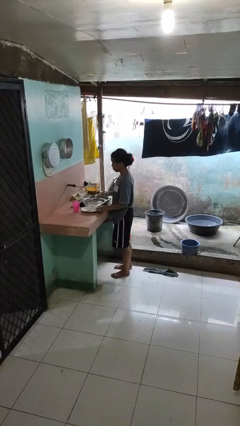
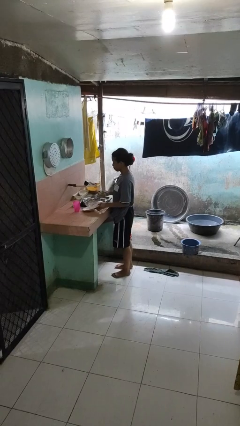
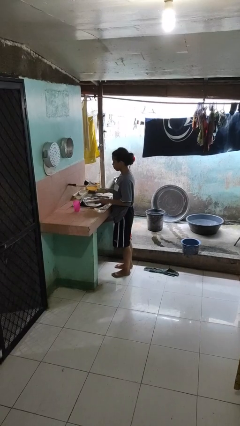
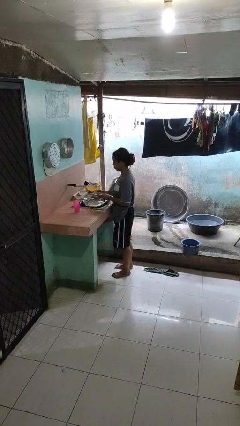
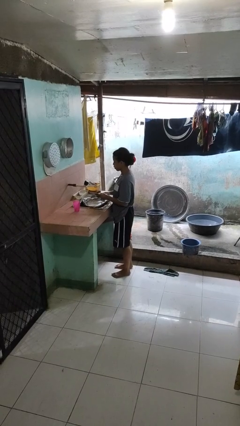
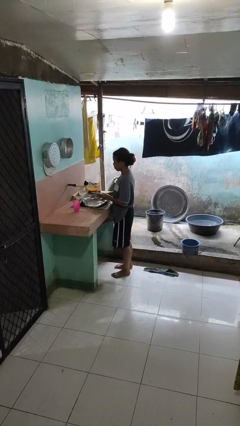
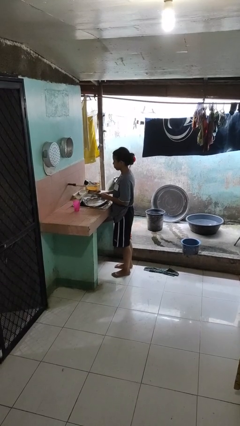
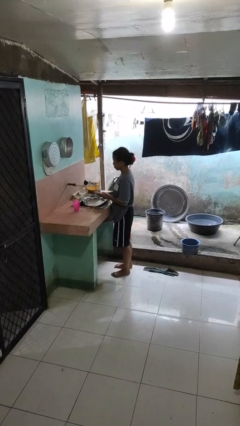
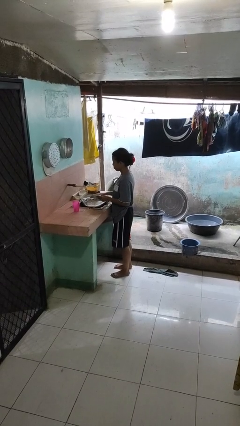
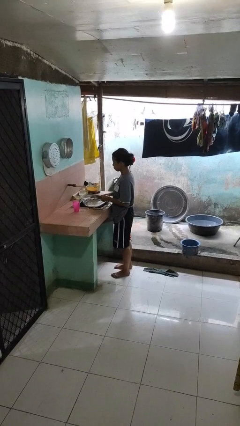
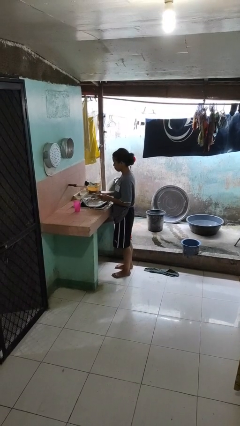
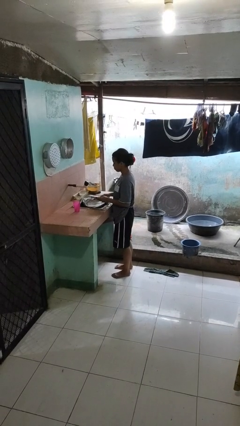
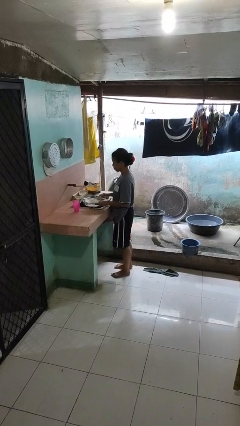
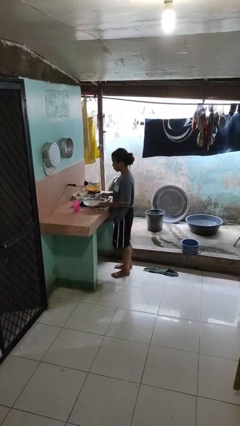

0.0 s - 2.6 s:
person washes dish

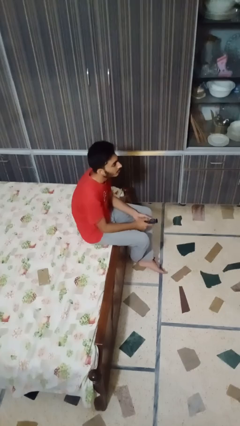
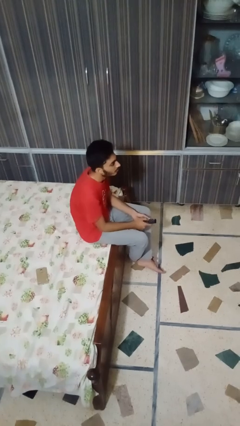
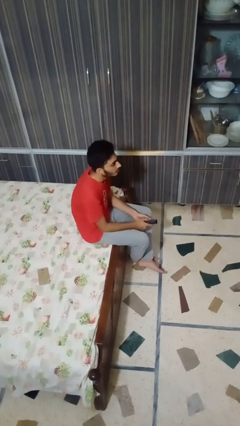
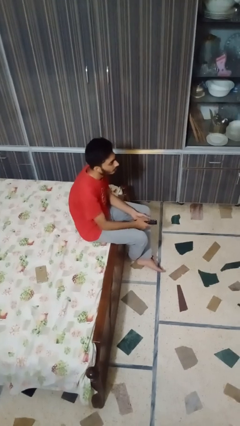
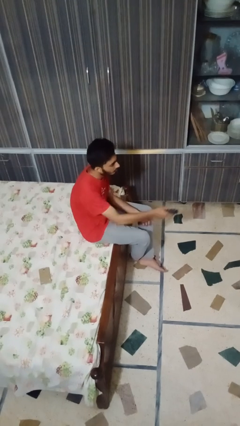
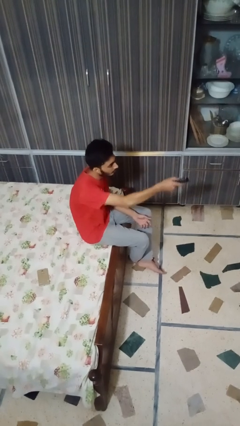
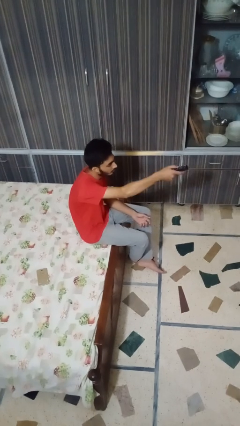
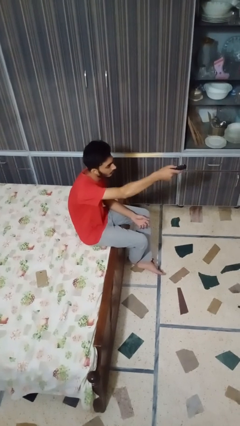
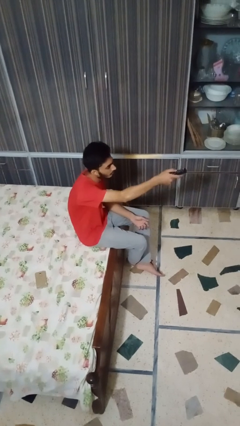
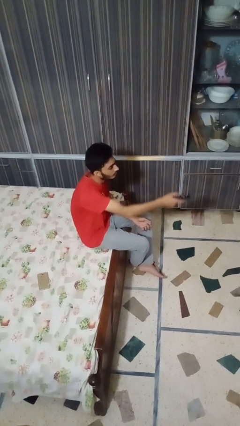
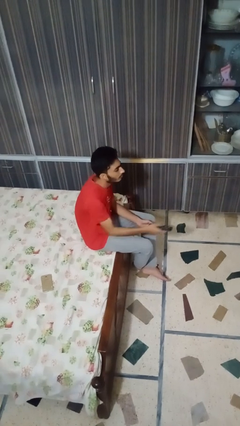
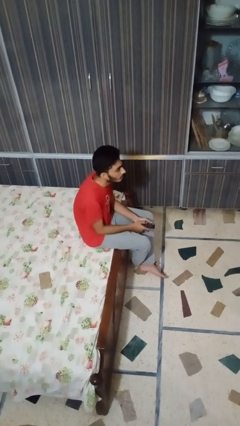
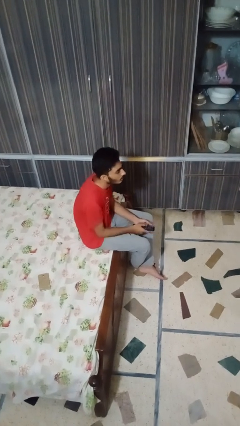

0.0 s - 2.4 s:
person uses television remote

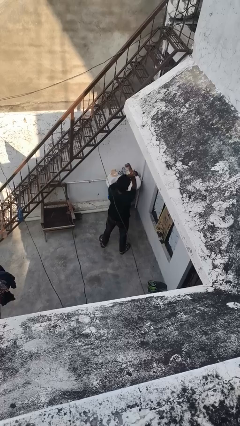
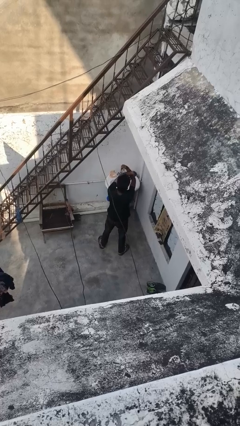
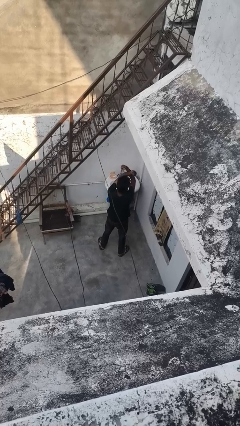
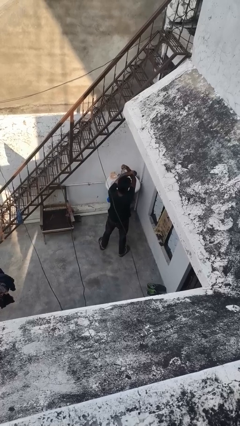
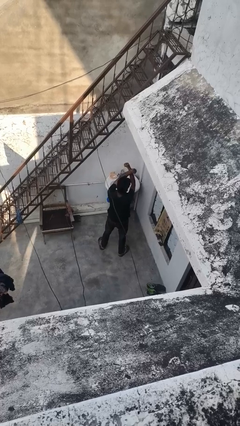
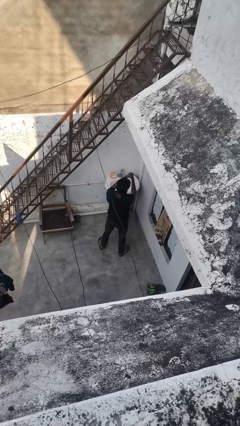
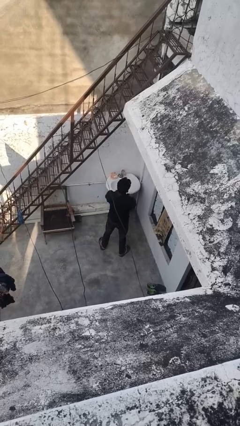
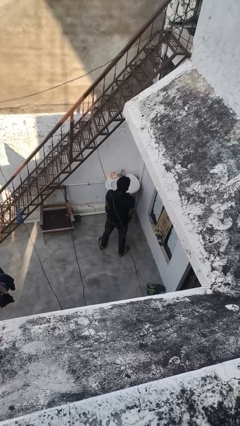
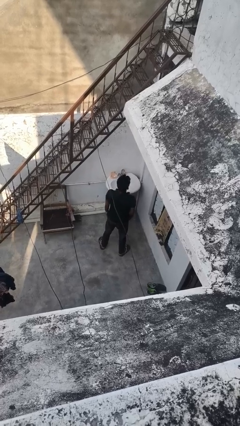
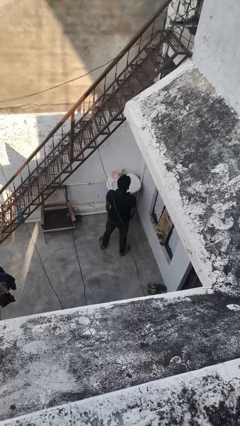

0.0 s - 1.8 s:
person gestures arms x

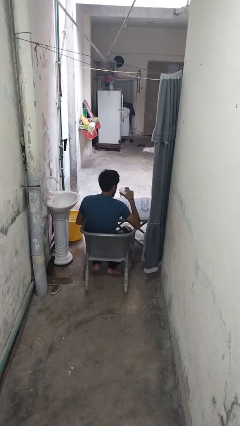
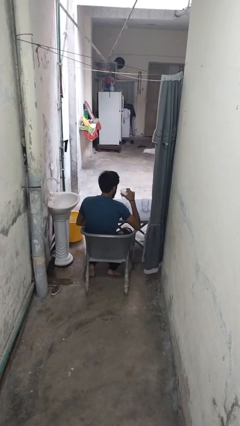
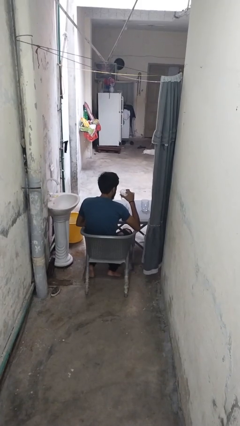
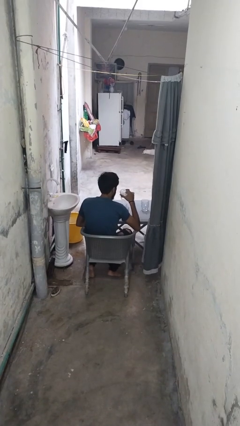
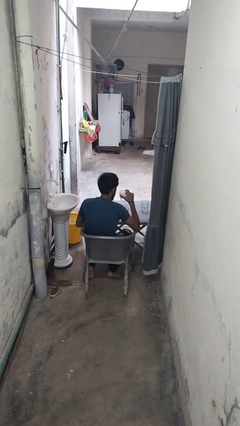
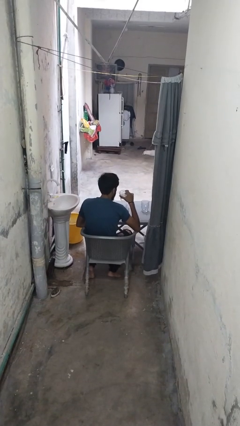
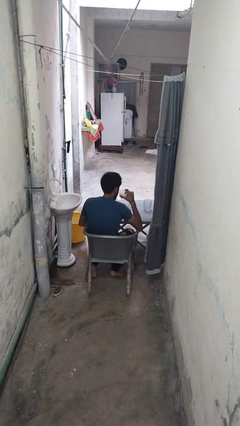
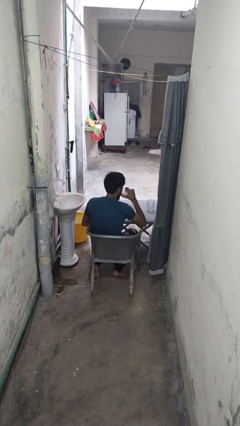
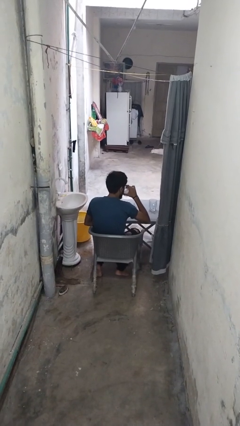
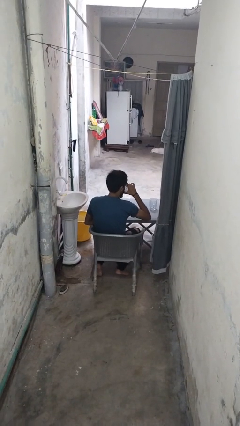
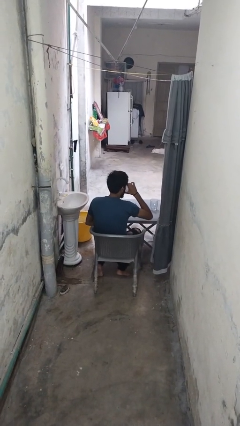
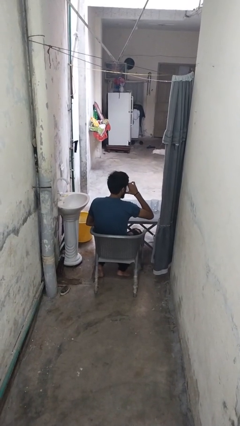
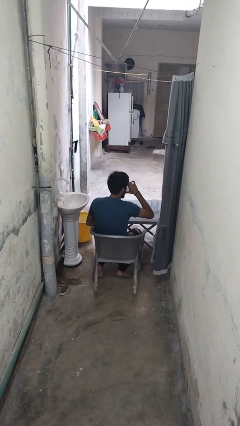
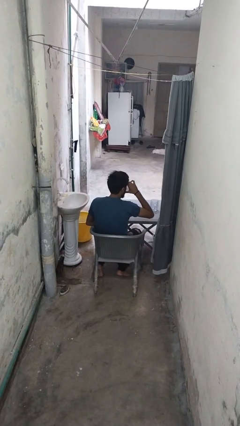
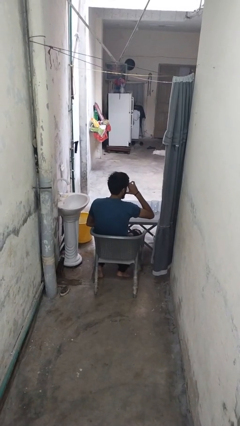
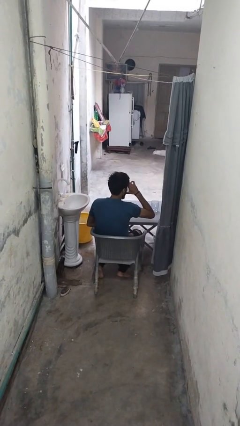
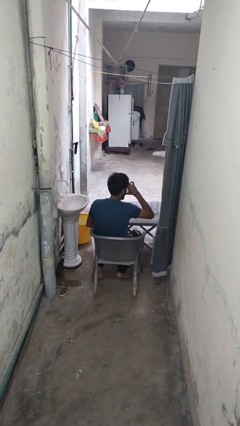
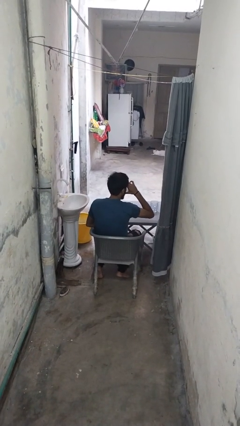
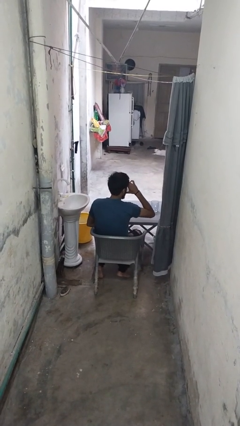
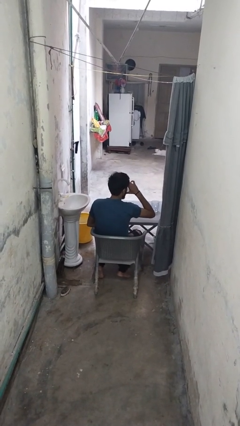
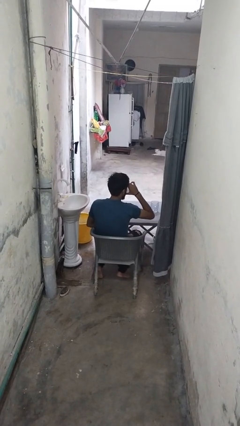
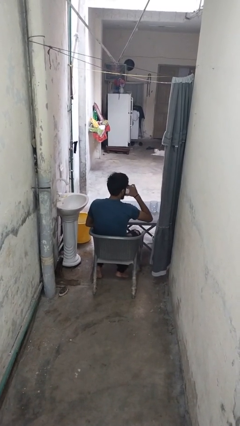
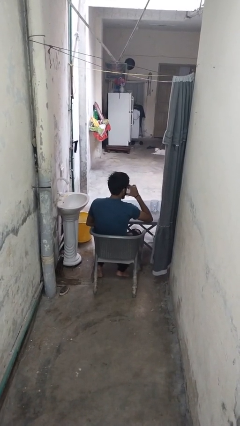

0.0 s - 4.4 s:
person drinks from shotglass

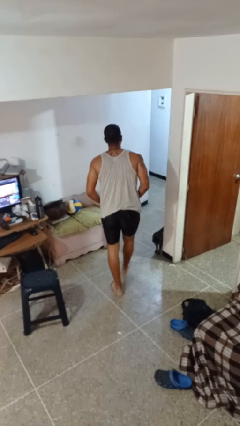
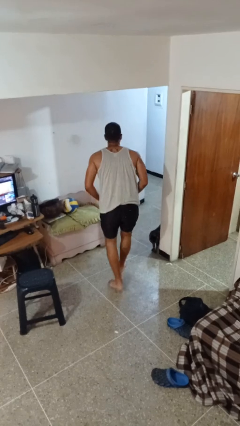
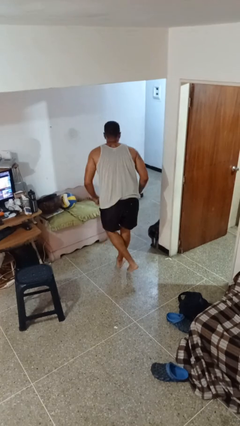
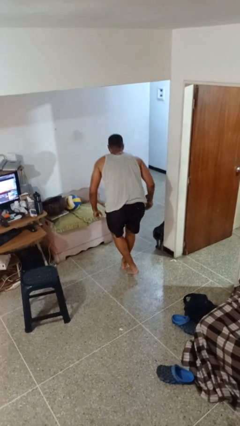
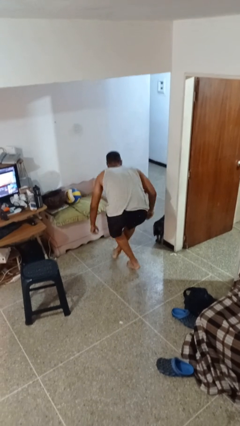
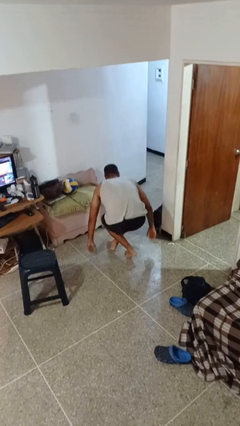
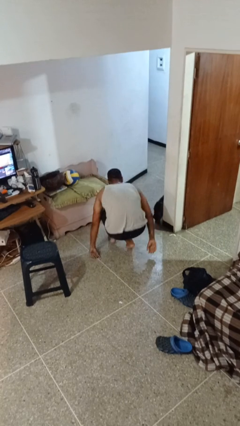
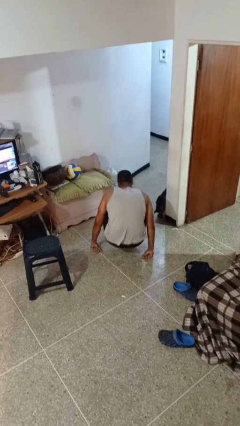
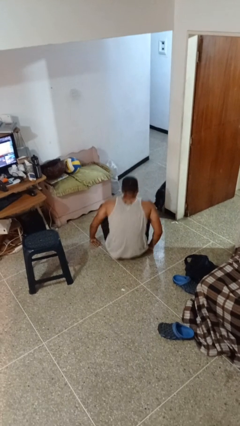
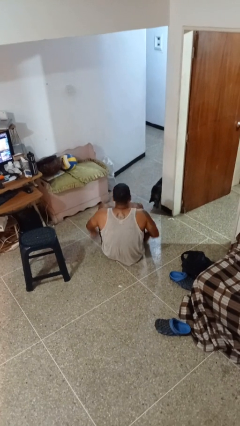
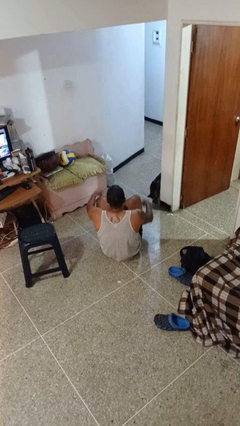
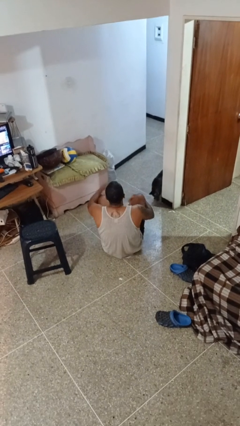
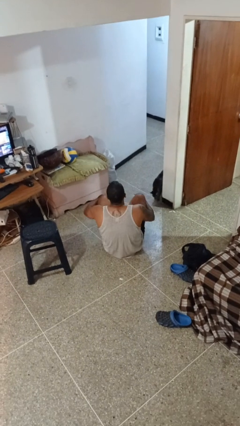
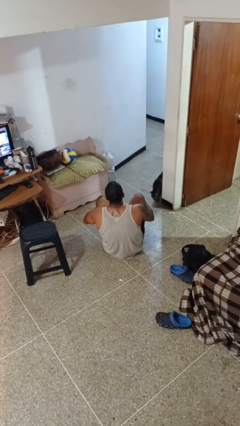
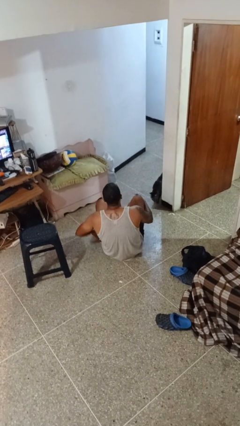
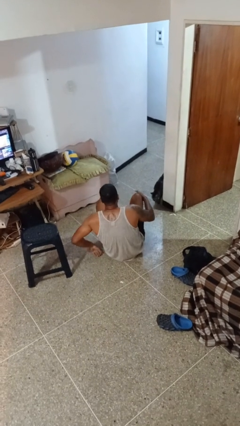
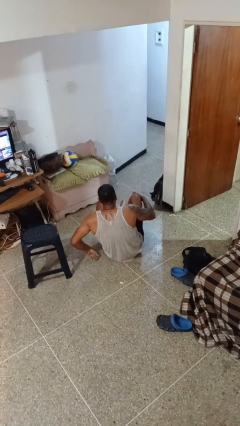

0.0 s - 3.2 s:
person sits crisscross

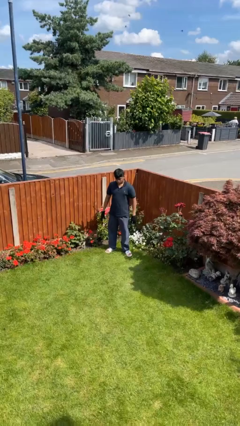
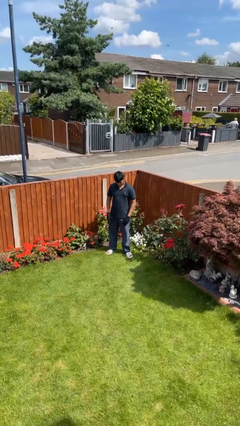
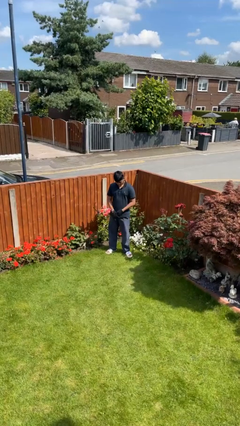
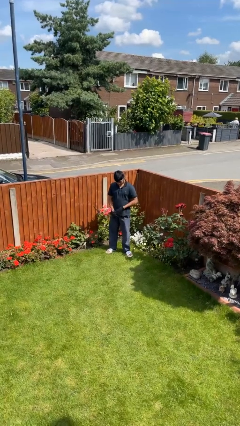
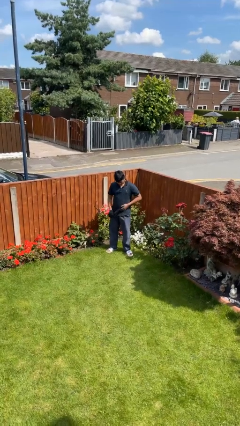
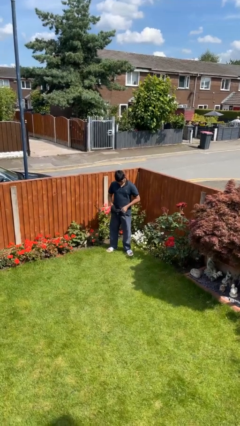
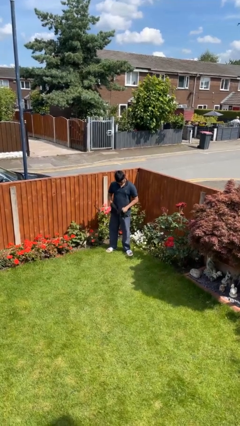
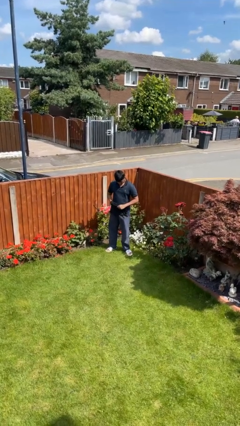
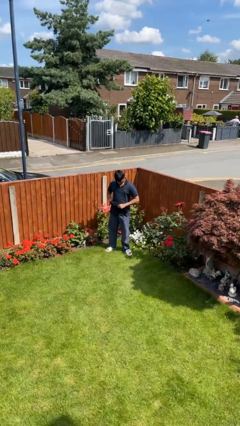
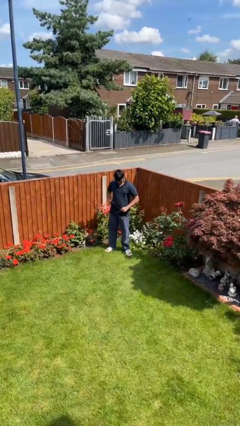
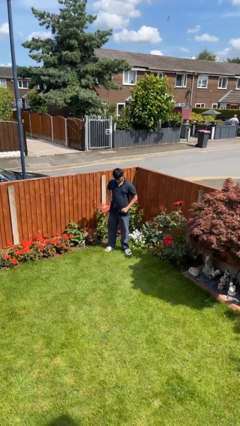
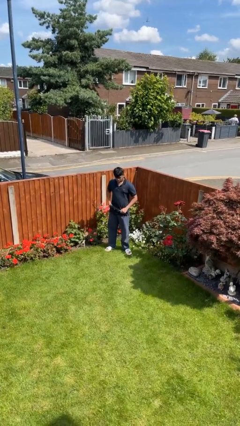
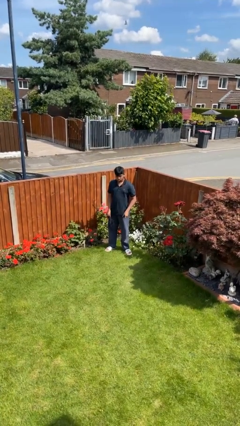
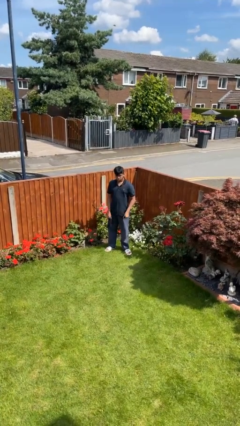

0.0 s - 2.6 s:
person takes off gloves

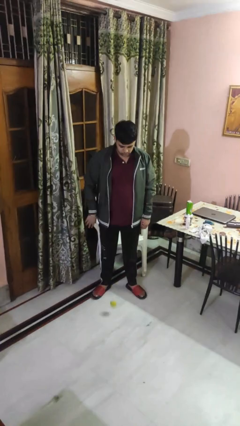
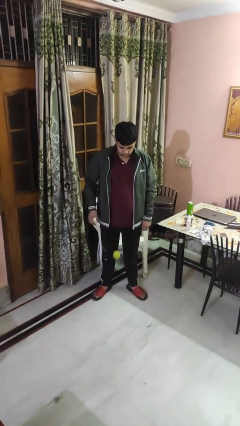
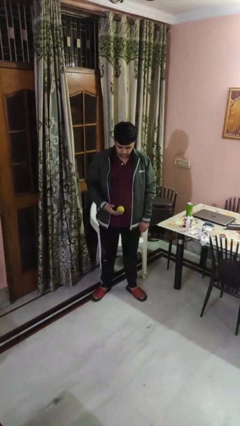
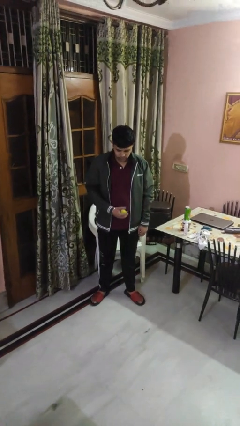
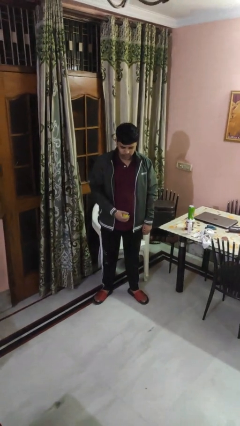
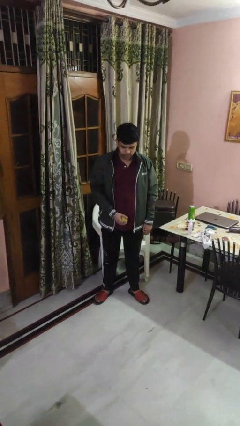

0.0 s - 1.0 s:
person bounces ball on floor
